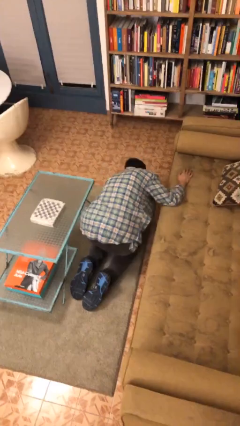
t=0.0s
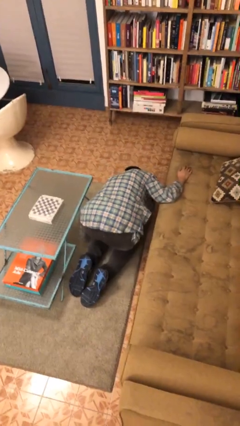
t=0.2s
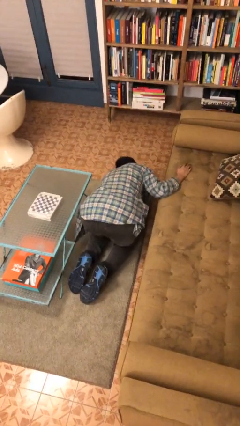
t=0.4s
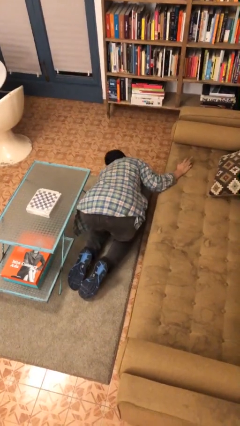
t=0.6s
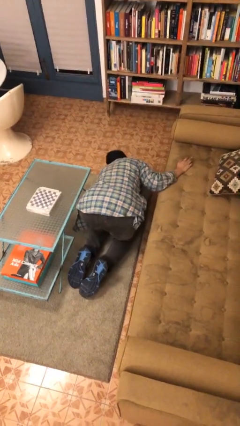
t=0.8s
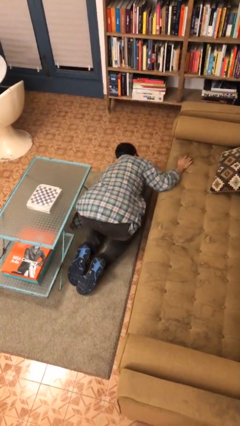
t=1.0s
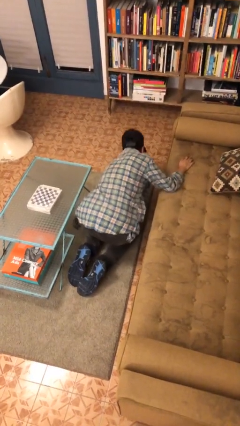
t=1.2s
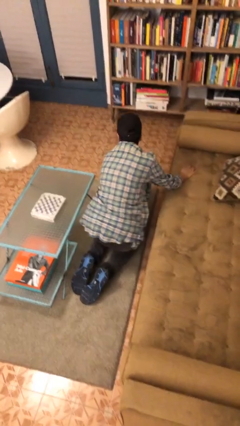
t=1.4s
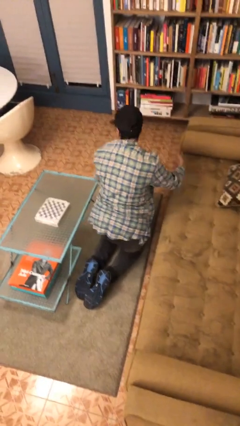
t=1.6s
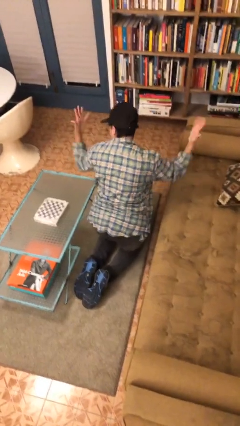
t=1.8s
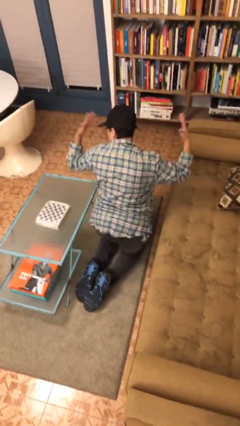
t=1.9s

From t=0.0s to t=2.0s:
person searches under couch

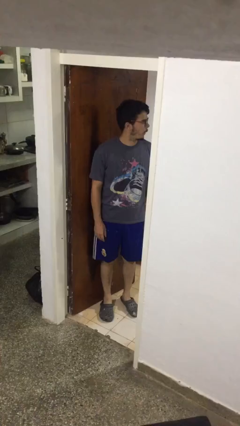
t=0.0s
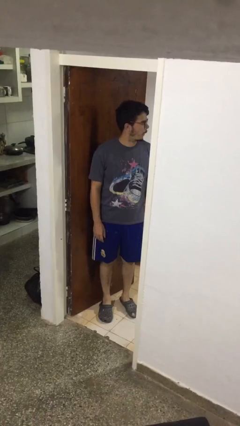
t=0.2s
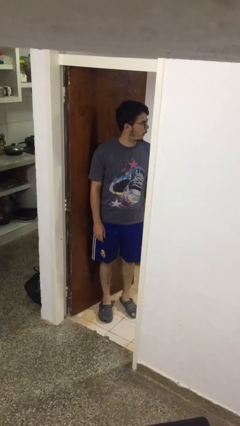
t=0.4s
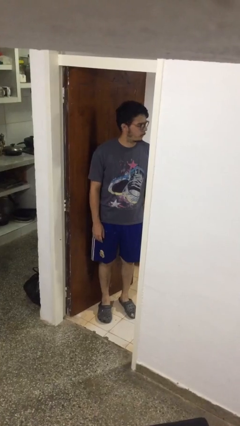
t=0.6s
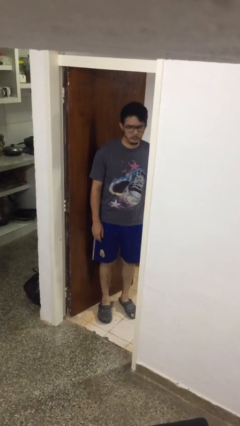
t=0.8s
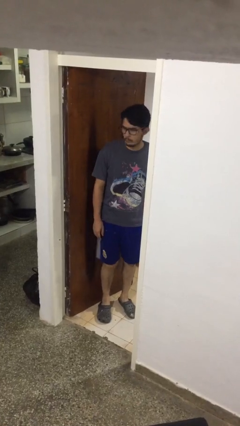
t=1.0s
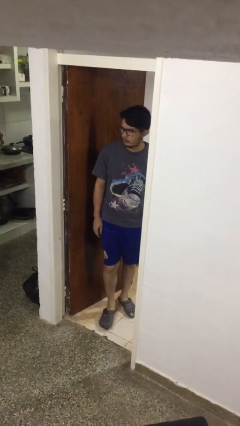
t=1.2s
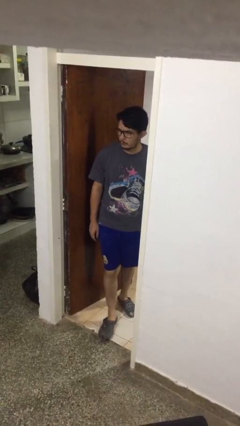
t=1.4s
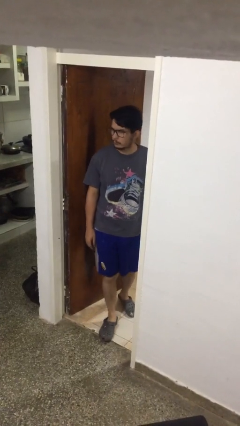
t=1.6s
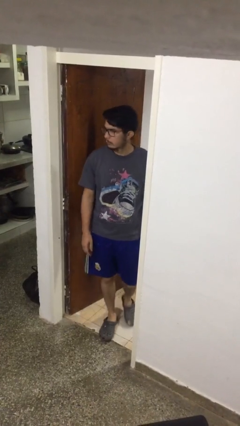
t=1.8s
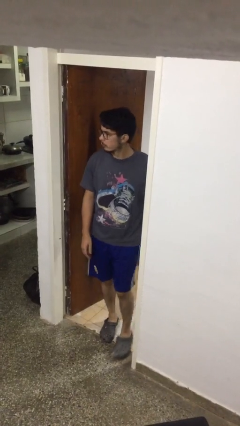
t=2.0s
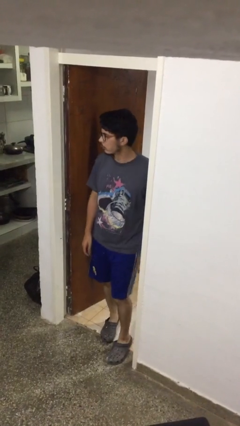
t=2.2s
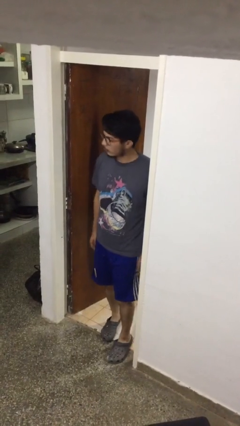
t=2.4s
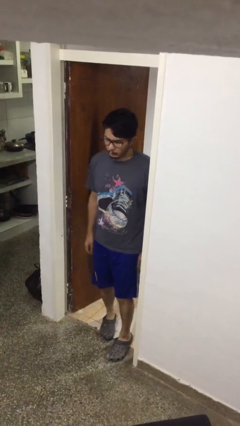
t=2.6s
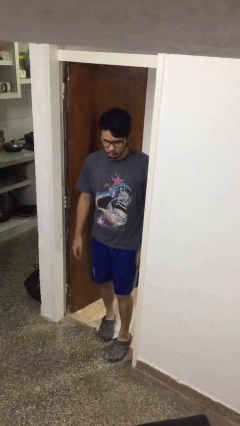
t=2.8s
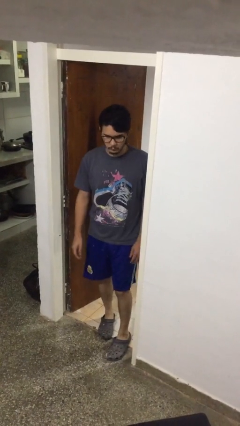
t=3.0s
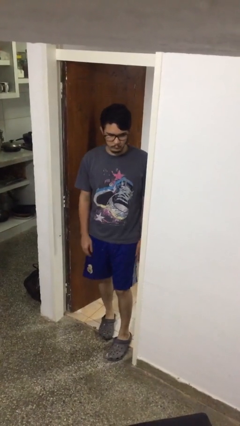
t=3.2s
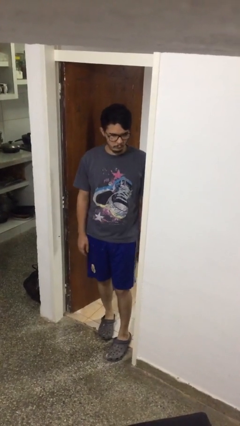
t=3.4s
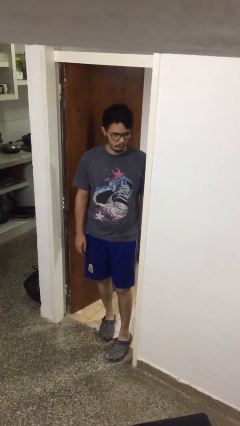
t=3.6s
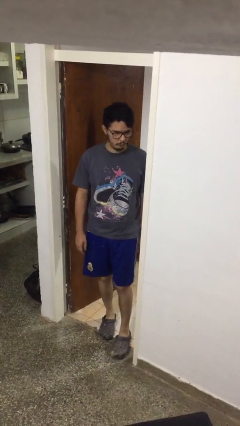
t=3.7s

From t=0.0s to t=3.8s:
person bumps into wall

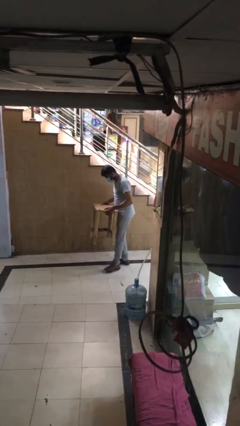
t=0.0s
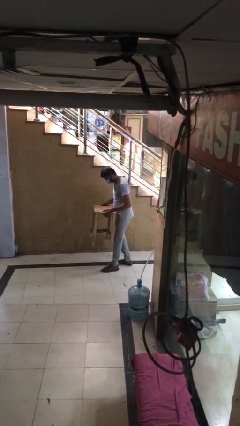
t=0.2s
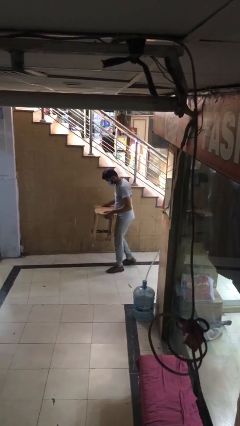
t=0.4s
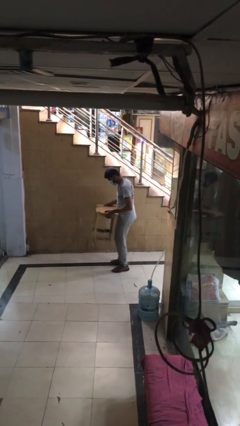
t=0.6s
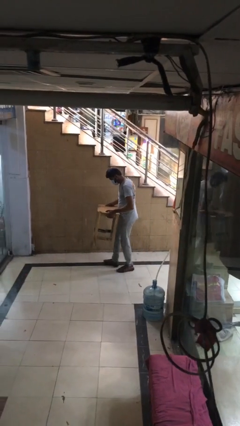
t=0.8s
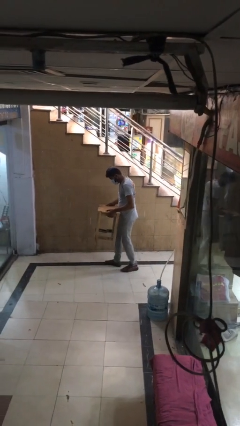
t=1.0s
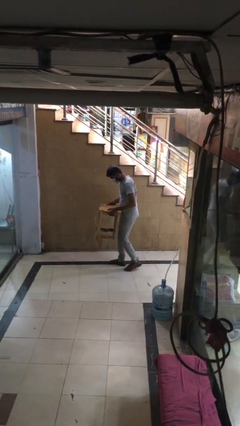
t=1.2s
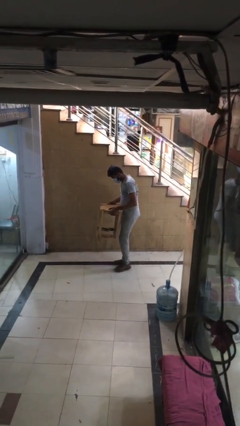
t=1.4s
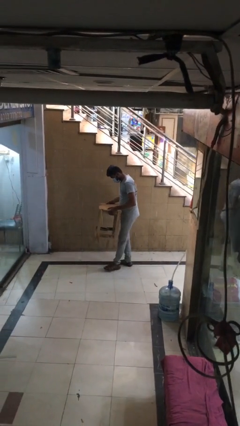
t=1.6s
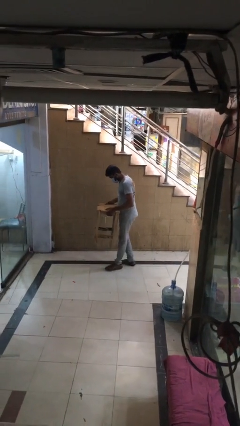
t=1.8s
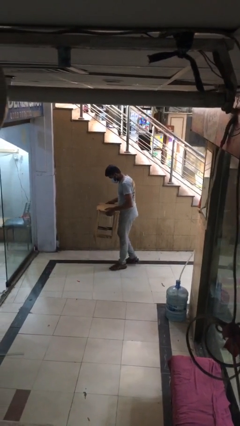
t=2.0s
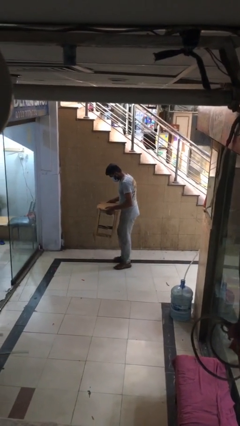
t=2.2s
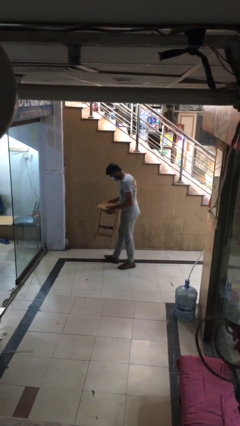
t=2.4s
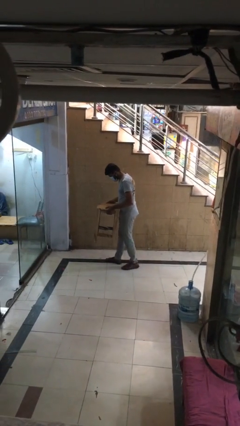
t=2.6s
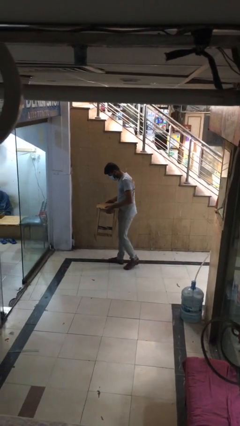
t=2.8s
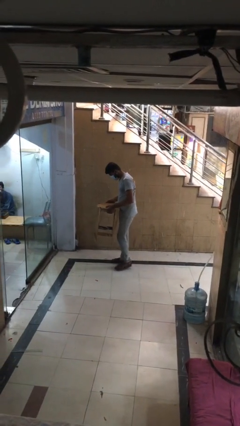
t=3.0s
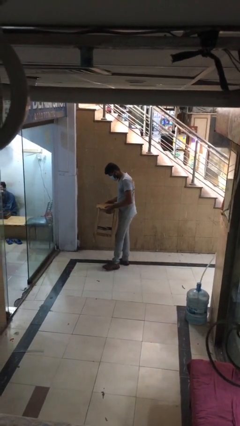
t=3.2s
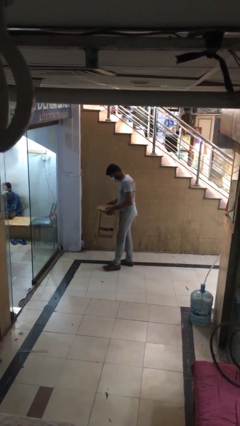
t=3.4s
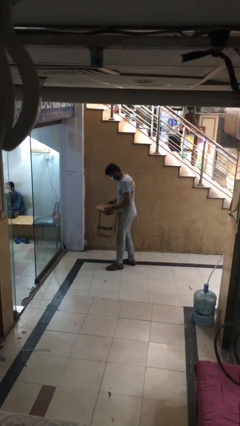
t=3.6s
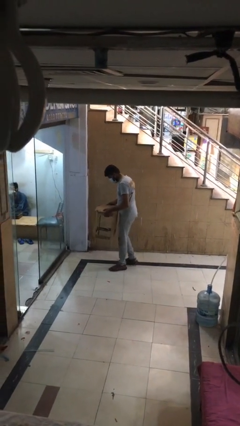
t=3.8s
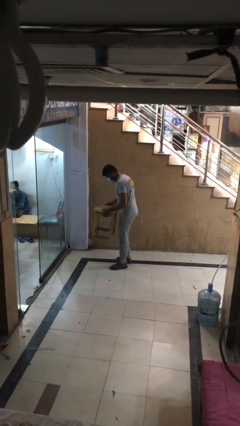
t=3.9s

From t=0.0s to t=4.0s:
person carries heavy object

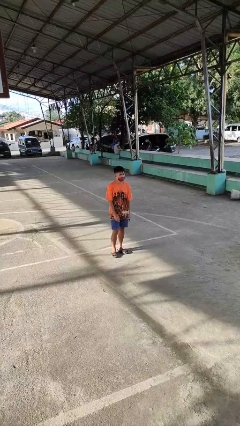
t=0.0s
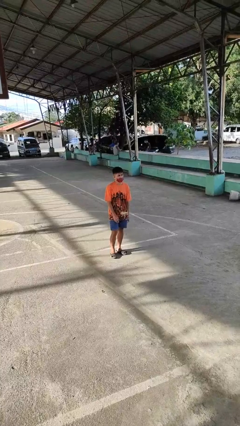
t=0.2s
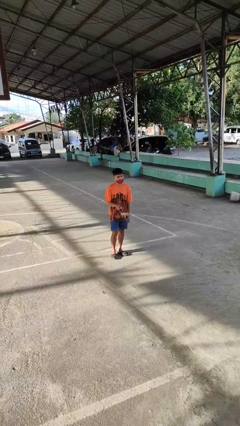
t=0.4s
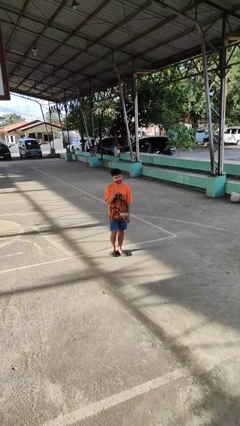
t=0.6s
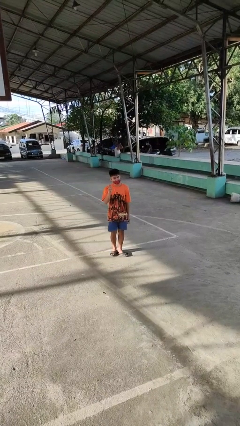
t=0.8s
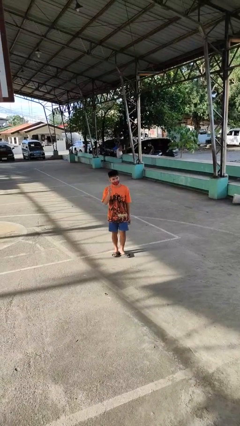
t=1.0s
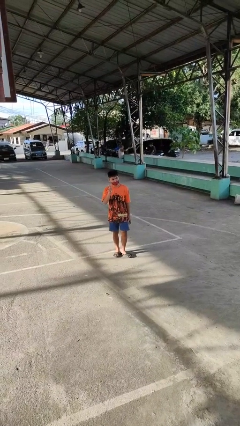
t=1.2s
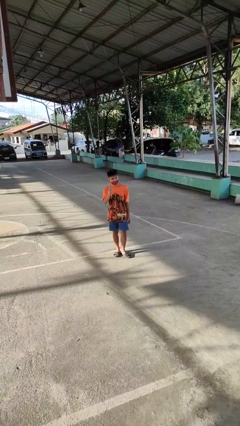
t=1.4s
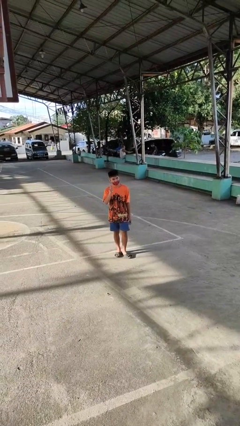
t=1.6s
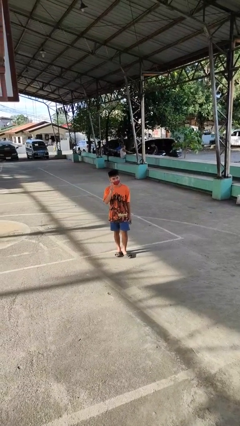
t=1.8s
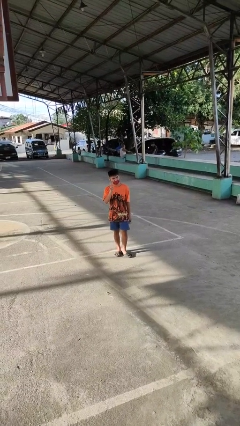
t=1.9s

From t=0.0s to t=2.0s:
person gestures peace

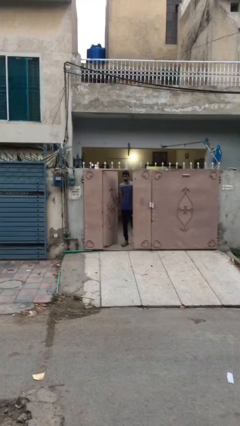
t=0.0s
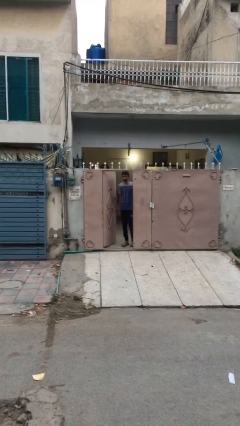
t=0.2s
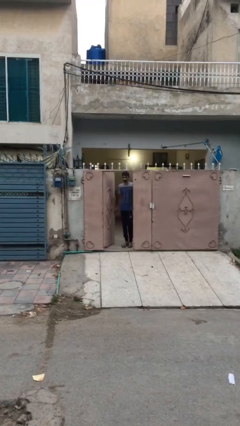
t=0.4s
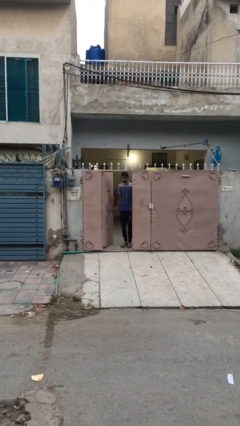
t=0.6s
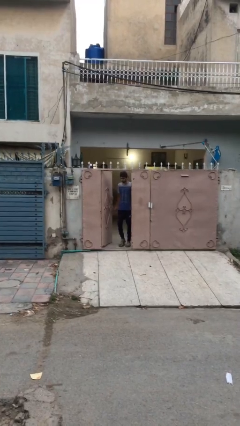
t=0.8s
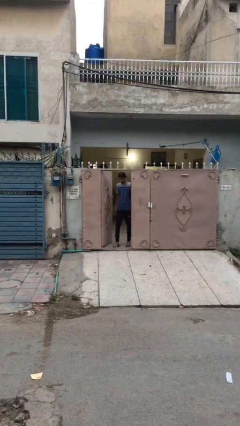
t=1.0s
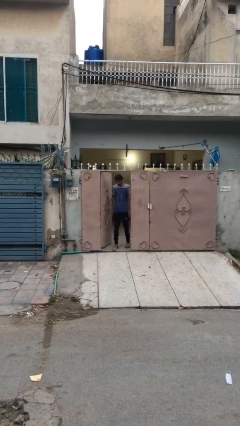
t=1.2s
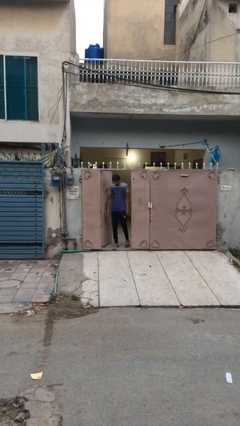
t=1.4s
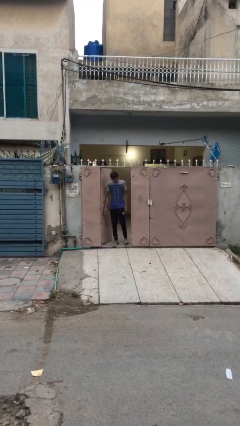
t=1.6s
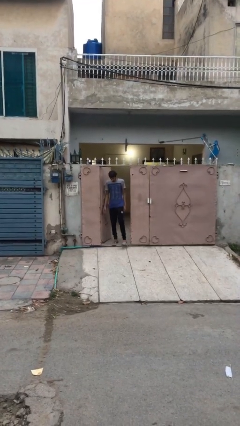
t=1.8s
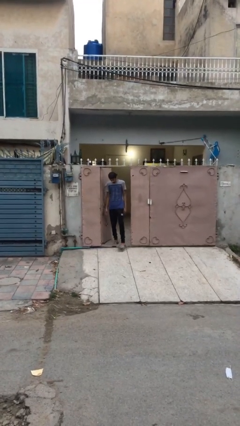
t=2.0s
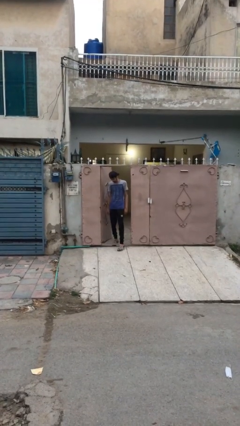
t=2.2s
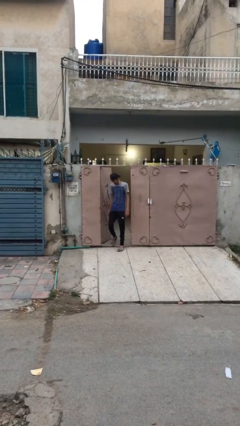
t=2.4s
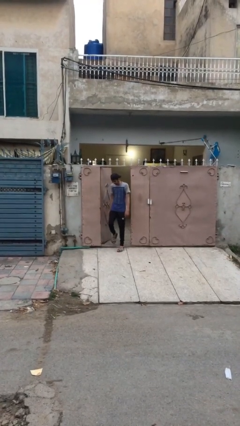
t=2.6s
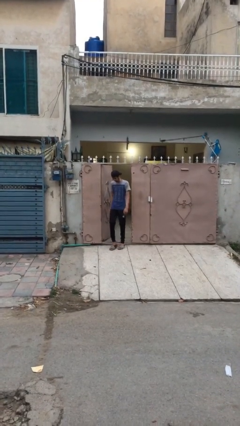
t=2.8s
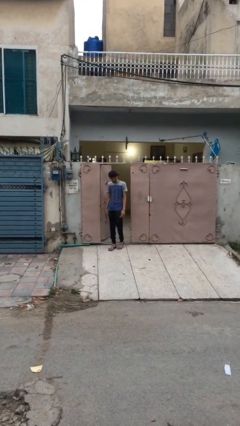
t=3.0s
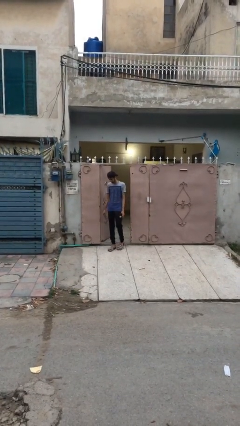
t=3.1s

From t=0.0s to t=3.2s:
person enters scene through structure

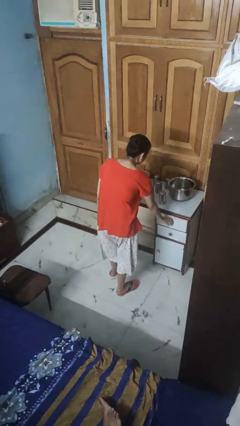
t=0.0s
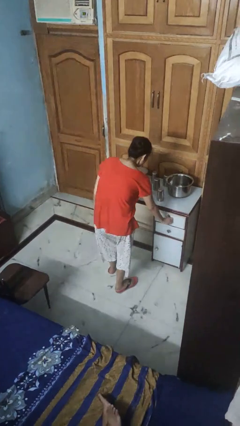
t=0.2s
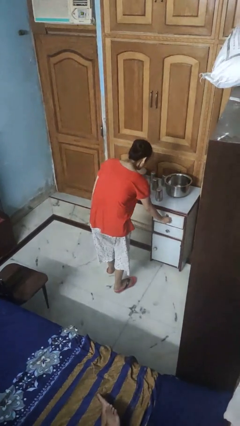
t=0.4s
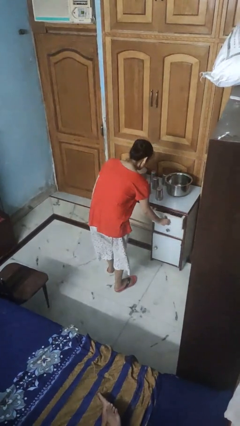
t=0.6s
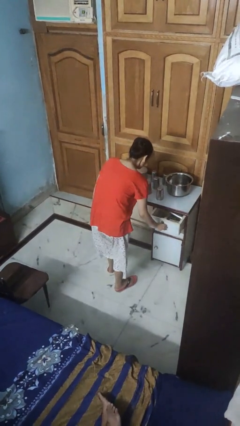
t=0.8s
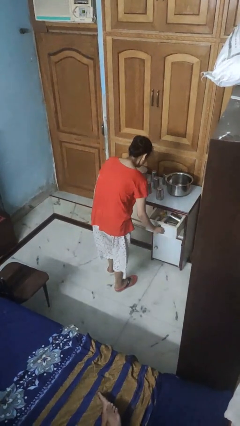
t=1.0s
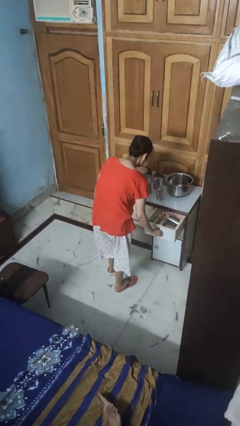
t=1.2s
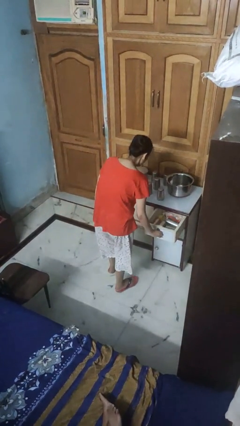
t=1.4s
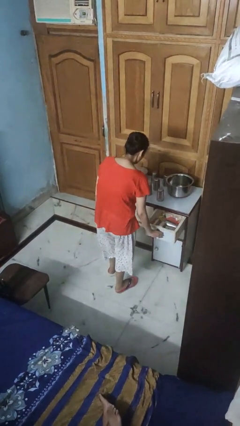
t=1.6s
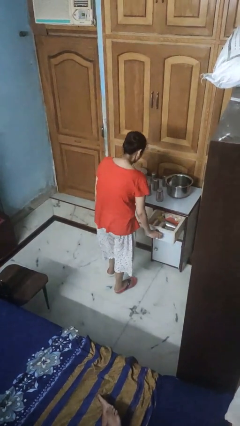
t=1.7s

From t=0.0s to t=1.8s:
person opens kitchen drawer

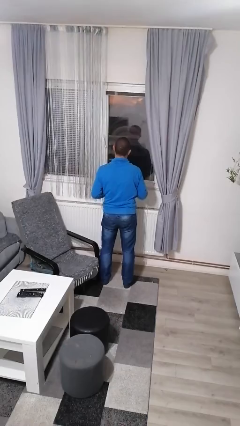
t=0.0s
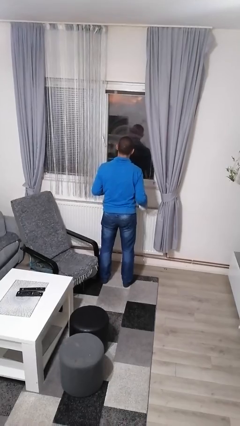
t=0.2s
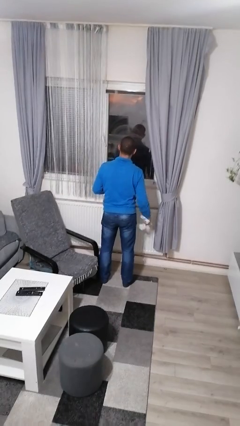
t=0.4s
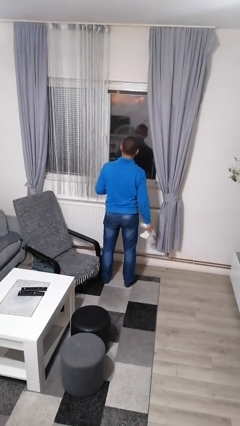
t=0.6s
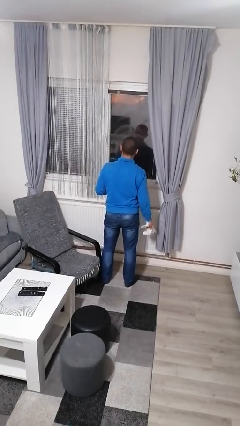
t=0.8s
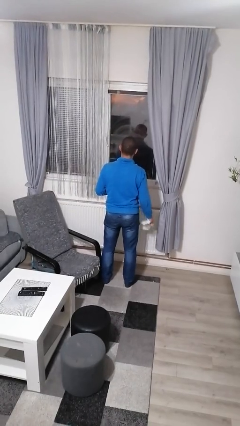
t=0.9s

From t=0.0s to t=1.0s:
person washes window
